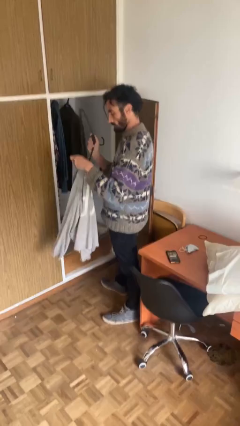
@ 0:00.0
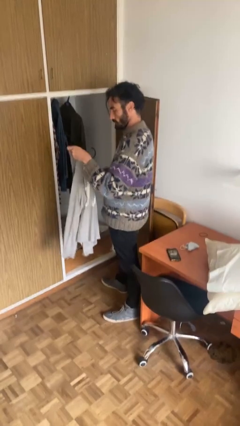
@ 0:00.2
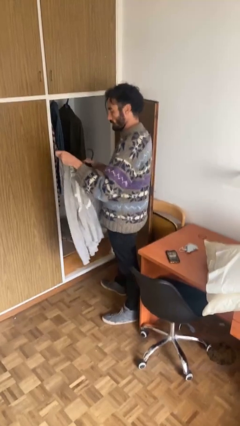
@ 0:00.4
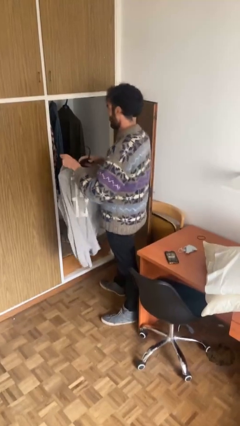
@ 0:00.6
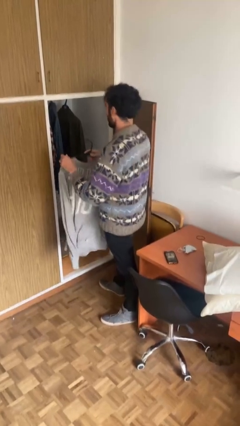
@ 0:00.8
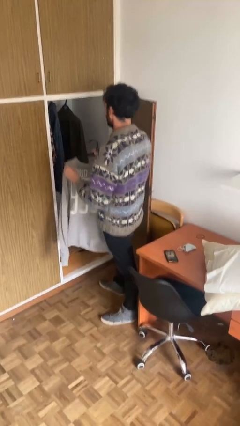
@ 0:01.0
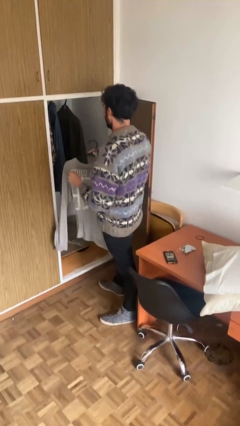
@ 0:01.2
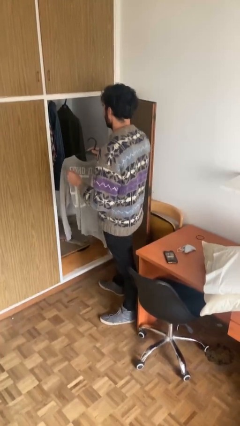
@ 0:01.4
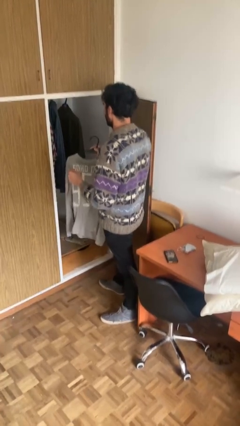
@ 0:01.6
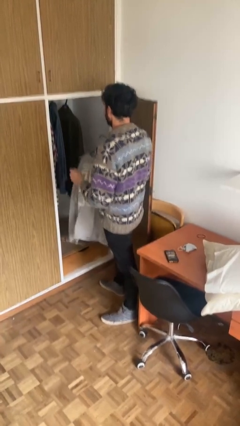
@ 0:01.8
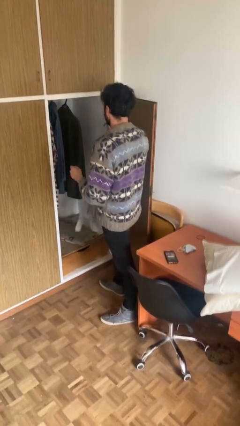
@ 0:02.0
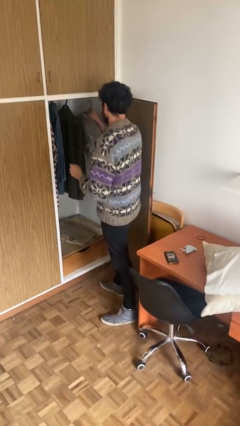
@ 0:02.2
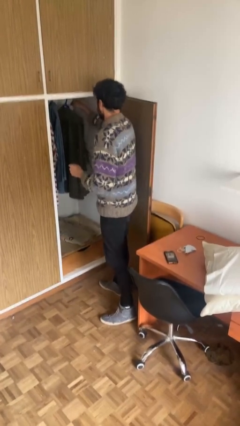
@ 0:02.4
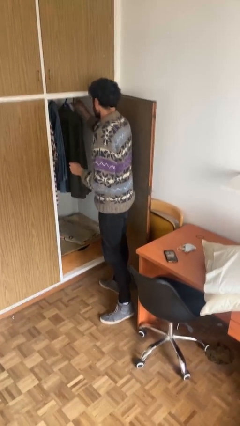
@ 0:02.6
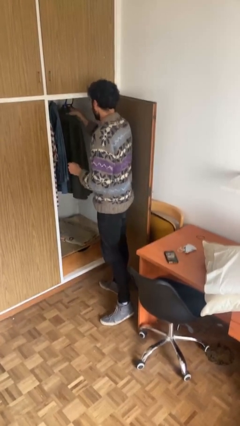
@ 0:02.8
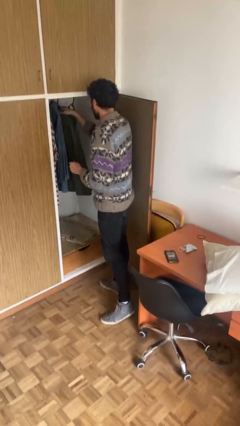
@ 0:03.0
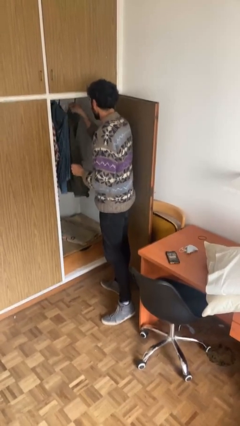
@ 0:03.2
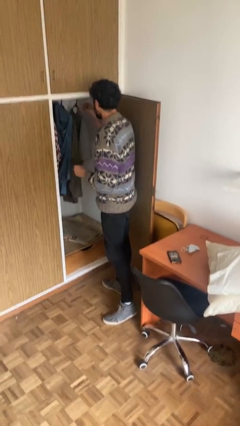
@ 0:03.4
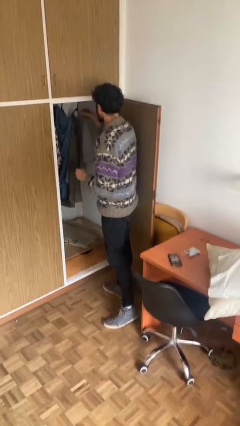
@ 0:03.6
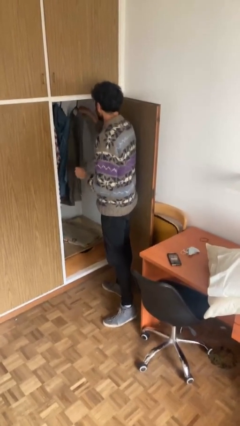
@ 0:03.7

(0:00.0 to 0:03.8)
person puts clothes into closet

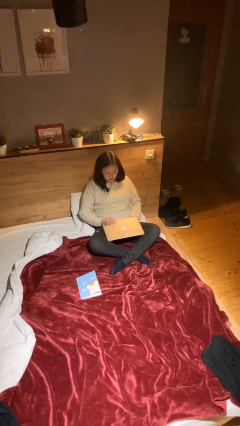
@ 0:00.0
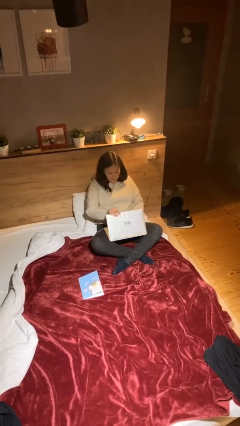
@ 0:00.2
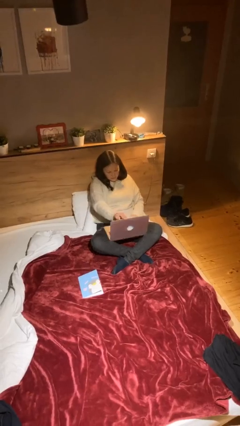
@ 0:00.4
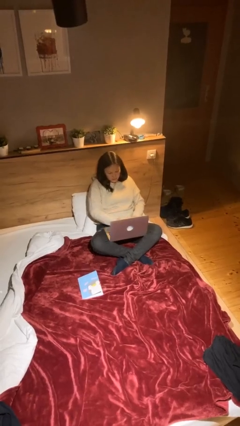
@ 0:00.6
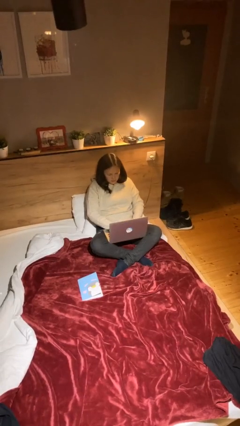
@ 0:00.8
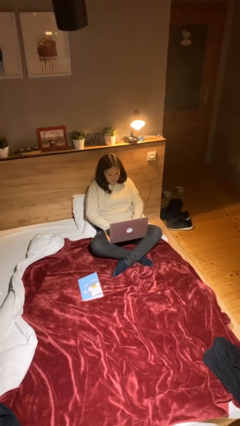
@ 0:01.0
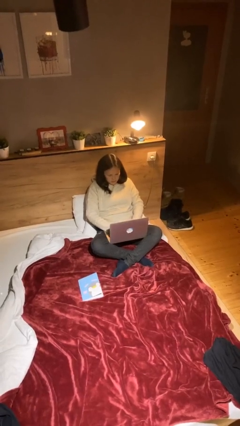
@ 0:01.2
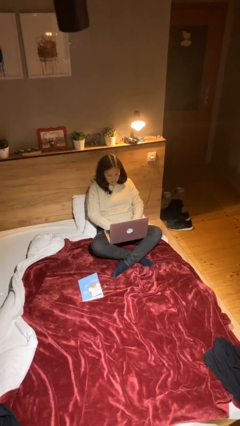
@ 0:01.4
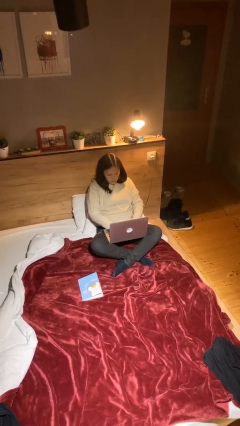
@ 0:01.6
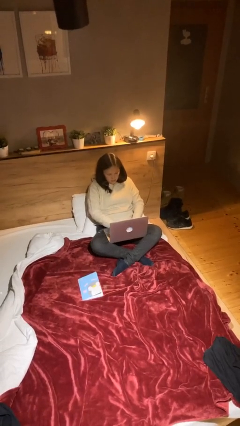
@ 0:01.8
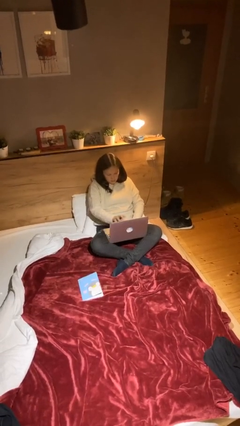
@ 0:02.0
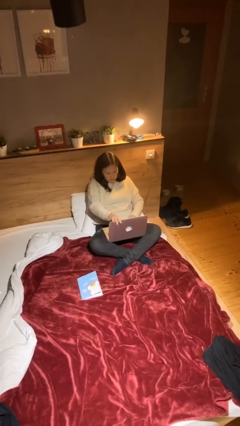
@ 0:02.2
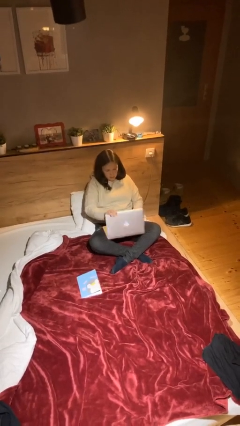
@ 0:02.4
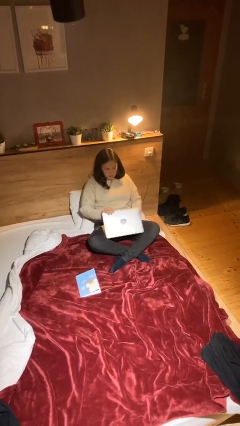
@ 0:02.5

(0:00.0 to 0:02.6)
person interacts with laptop

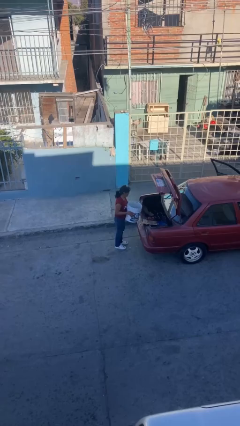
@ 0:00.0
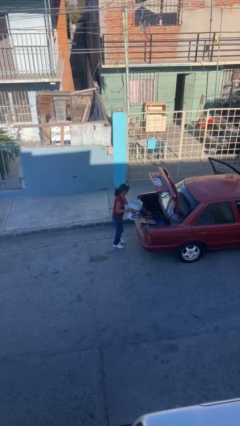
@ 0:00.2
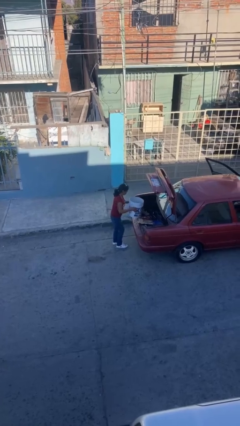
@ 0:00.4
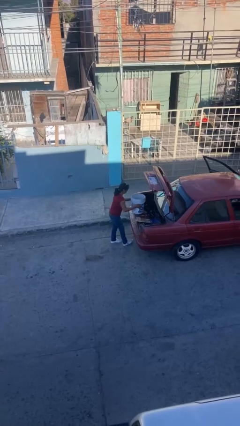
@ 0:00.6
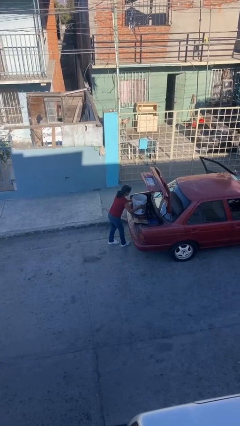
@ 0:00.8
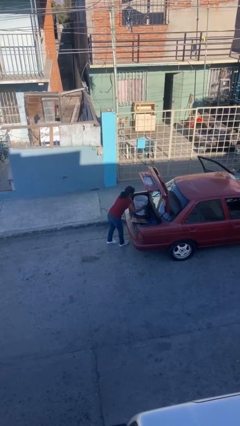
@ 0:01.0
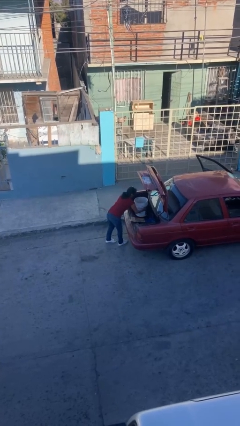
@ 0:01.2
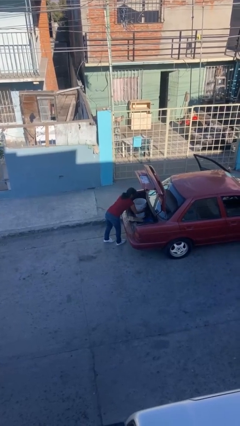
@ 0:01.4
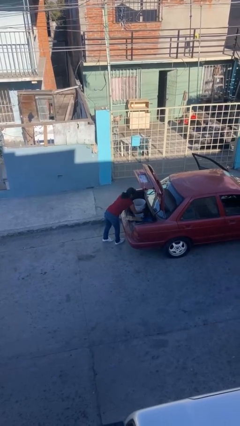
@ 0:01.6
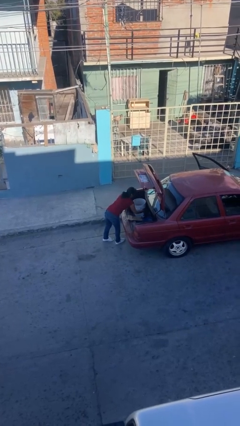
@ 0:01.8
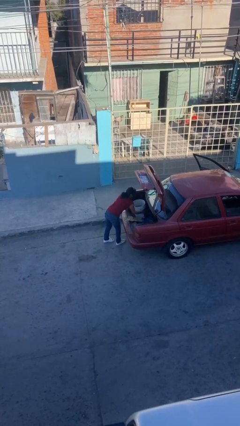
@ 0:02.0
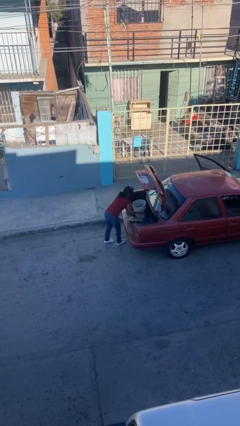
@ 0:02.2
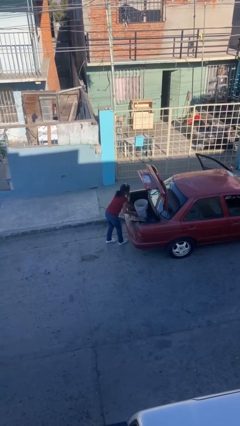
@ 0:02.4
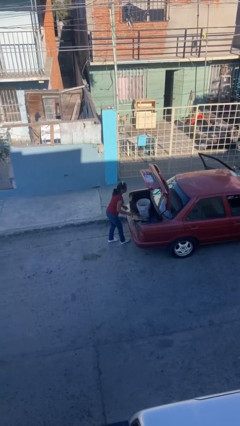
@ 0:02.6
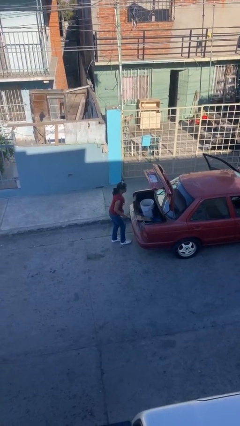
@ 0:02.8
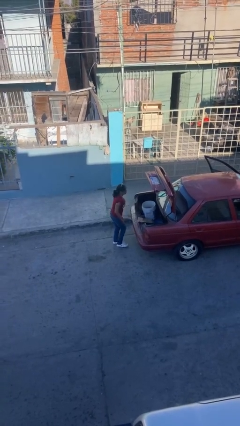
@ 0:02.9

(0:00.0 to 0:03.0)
person loads car

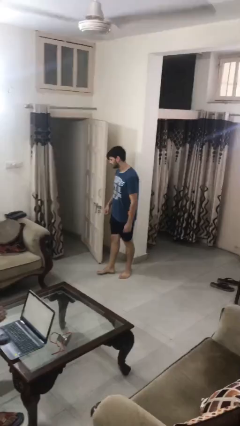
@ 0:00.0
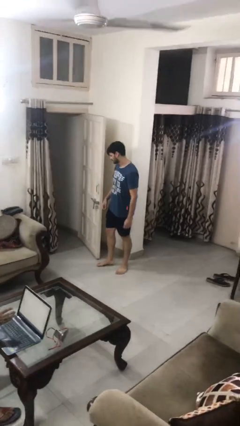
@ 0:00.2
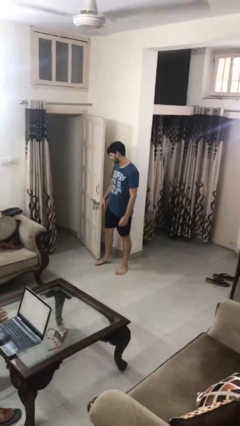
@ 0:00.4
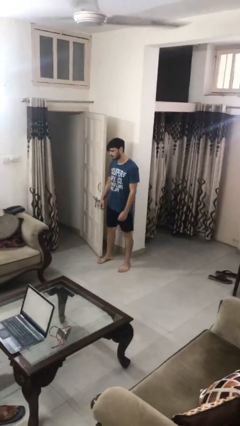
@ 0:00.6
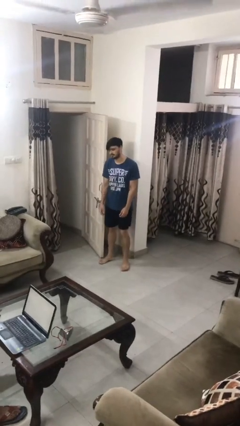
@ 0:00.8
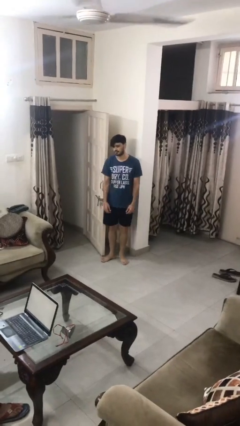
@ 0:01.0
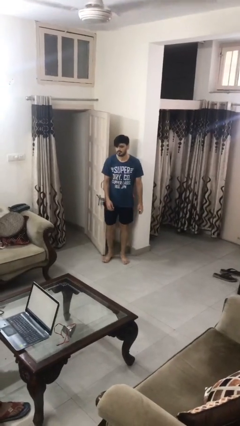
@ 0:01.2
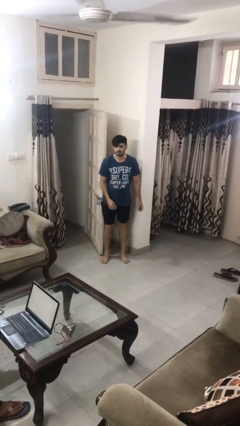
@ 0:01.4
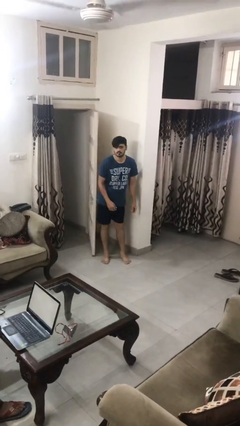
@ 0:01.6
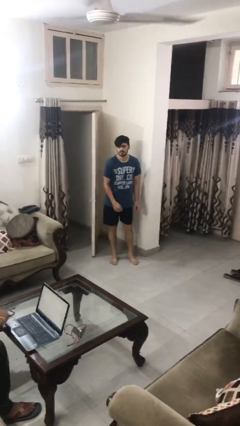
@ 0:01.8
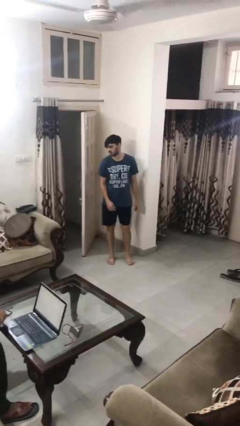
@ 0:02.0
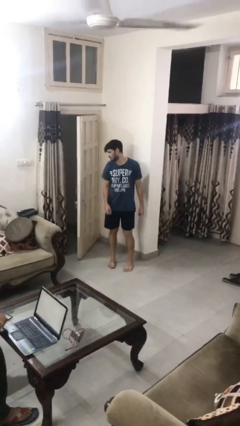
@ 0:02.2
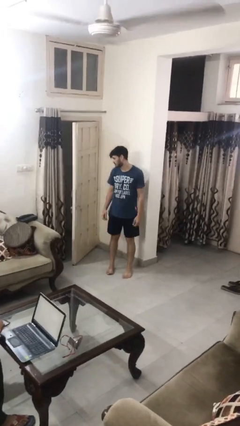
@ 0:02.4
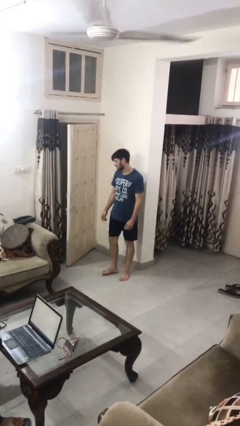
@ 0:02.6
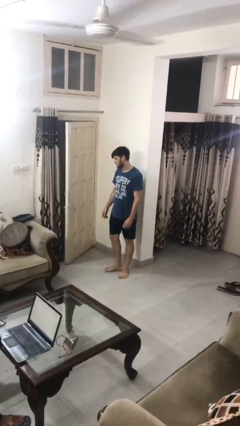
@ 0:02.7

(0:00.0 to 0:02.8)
person closes door with hip

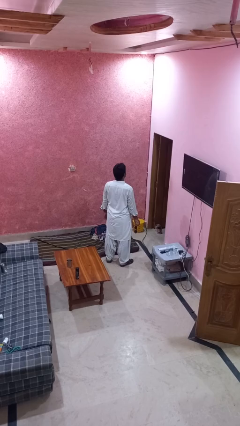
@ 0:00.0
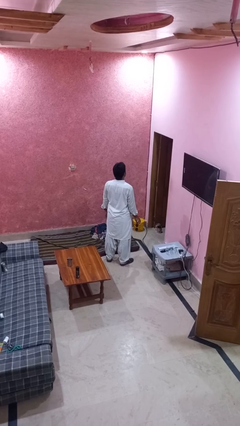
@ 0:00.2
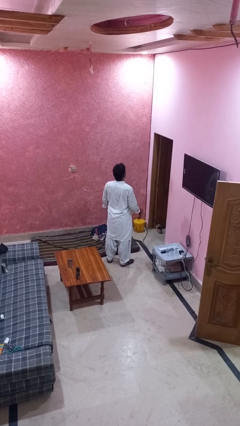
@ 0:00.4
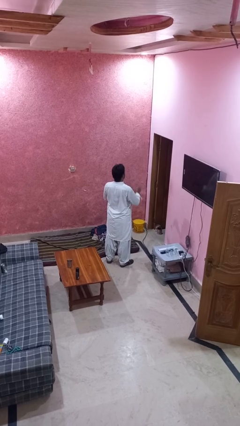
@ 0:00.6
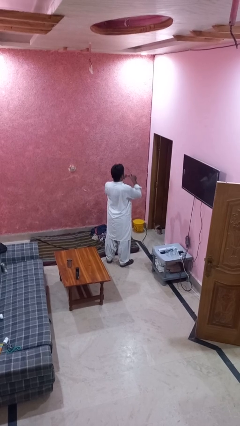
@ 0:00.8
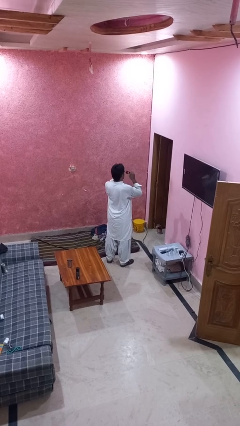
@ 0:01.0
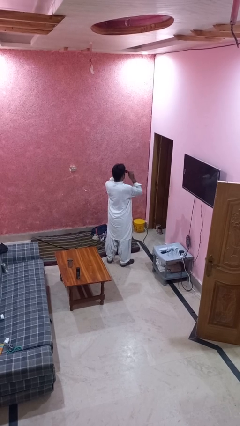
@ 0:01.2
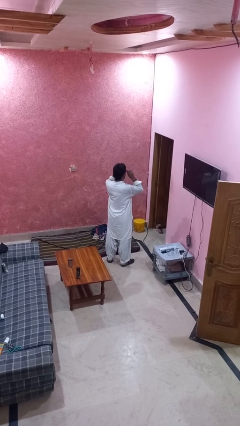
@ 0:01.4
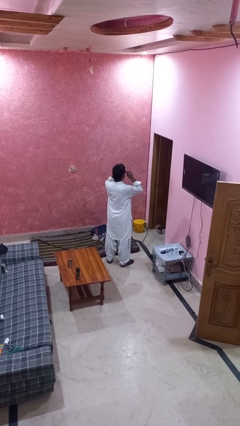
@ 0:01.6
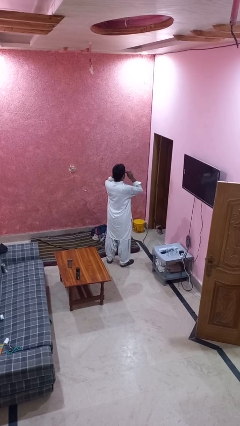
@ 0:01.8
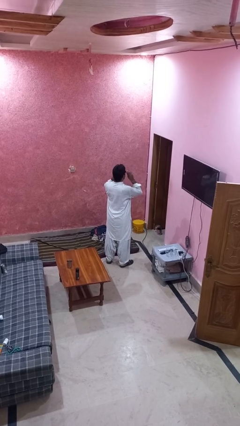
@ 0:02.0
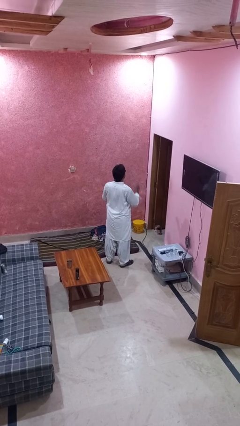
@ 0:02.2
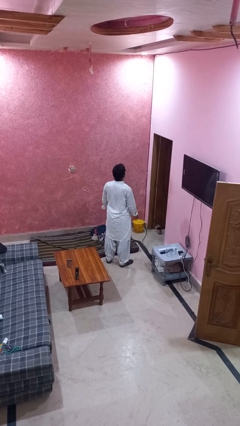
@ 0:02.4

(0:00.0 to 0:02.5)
person puts on sunglasses

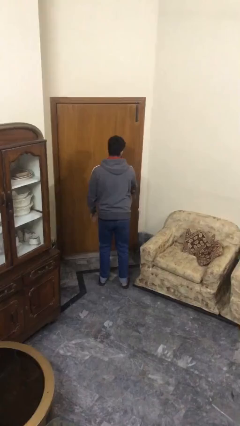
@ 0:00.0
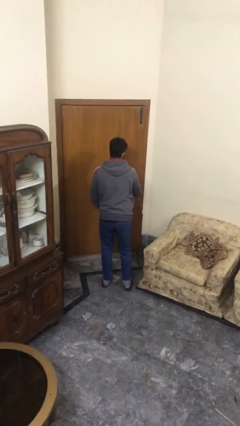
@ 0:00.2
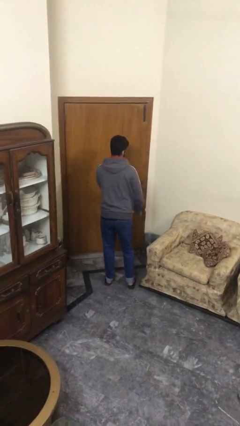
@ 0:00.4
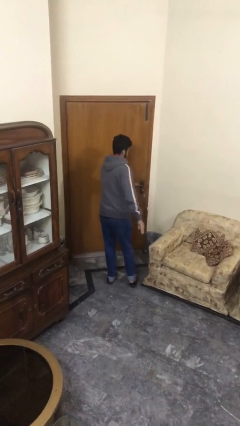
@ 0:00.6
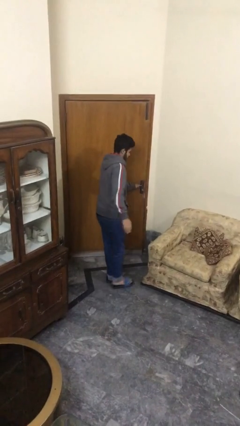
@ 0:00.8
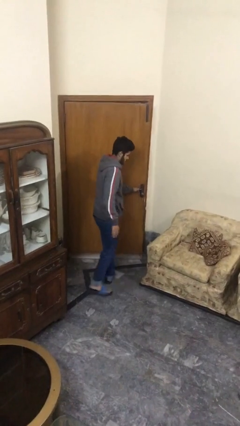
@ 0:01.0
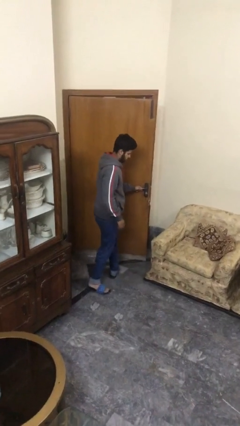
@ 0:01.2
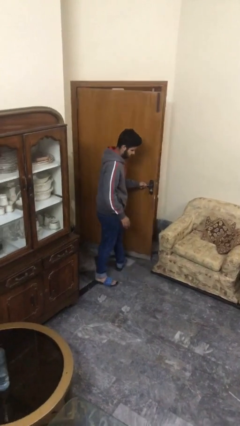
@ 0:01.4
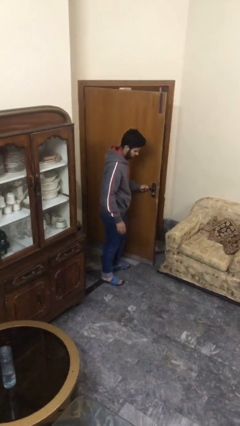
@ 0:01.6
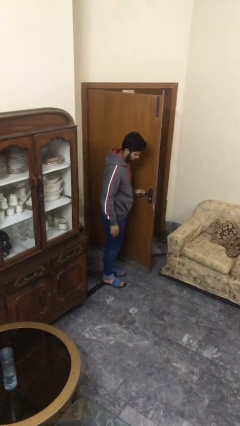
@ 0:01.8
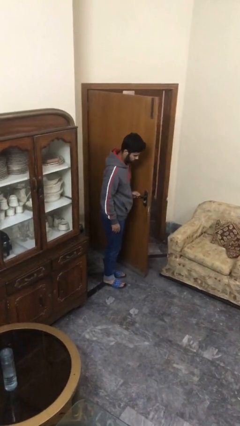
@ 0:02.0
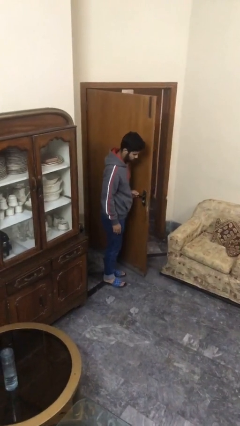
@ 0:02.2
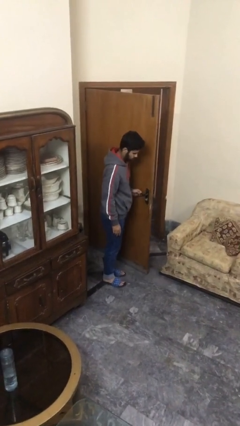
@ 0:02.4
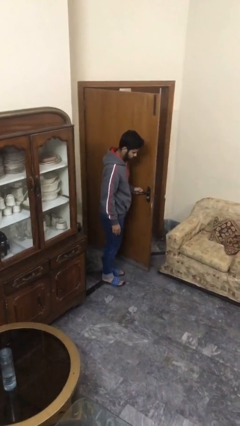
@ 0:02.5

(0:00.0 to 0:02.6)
person opens facility door

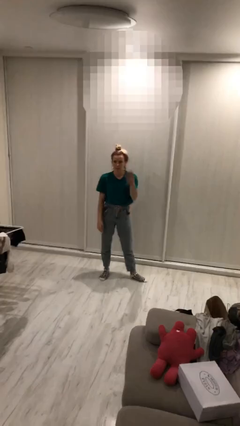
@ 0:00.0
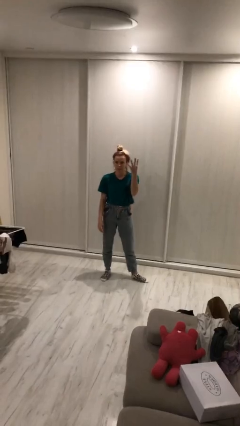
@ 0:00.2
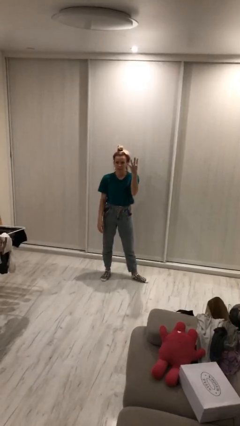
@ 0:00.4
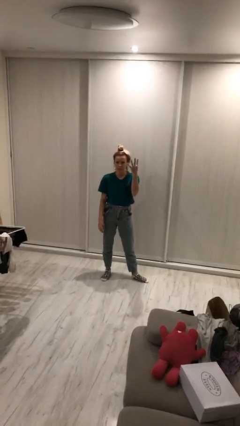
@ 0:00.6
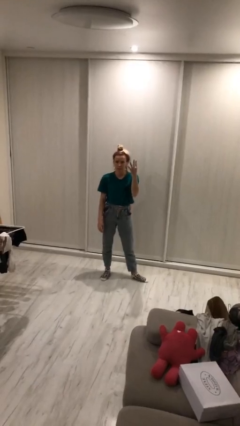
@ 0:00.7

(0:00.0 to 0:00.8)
person gestures number four
